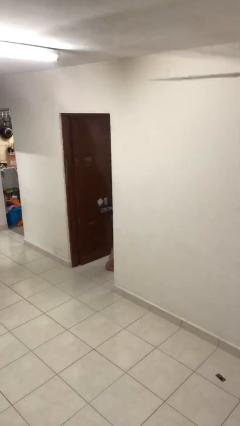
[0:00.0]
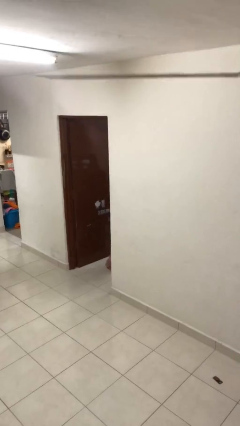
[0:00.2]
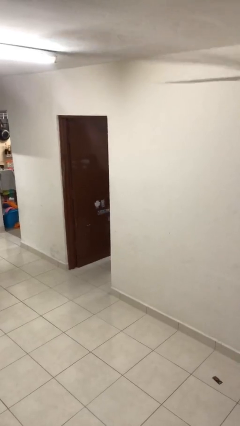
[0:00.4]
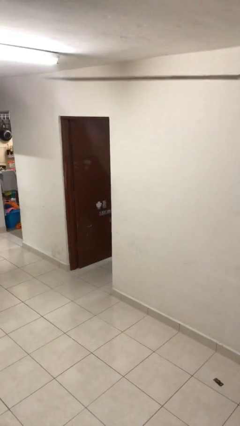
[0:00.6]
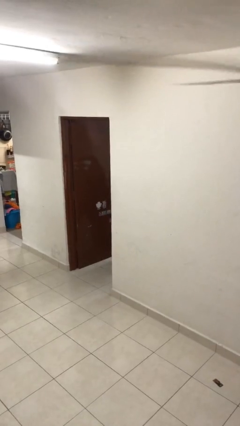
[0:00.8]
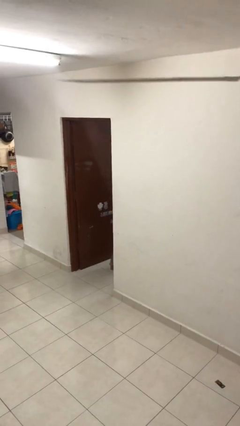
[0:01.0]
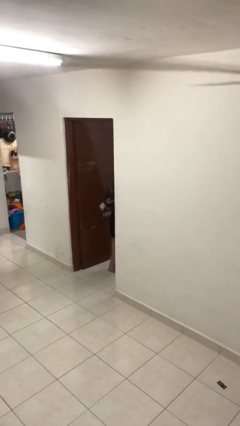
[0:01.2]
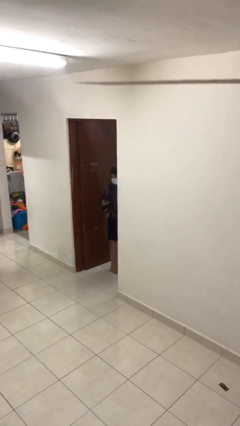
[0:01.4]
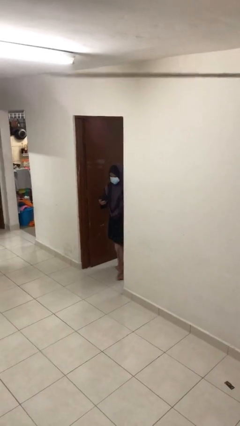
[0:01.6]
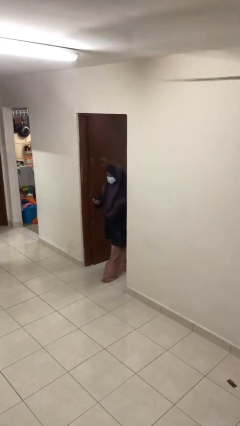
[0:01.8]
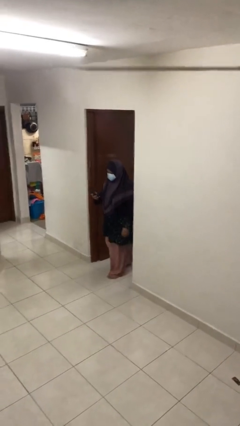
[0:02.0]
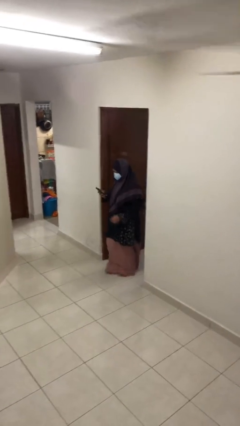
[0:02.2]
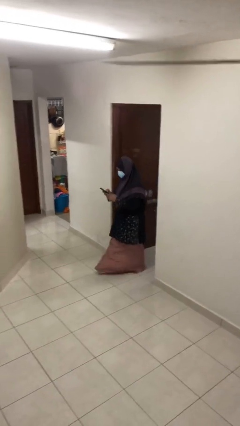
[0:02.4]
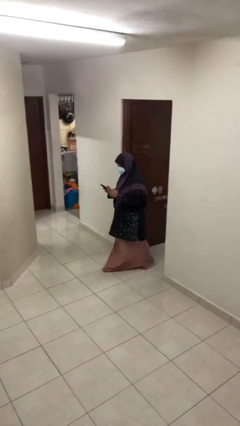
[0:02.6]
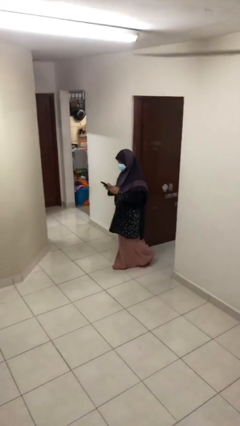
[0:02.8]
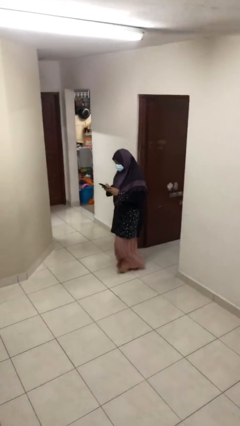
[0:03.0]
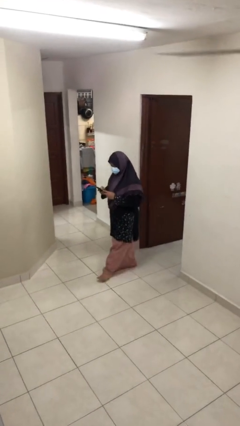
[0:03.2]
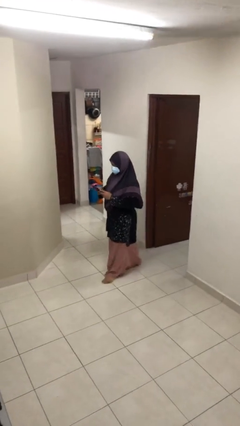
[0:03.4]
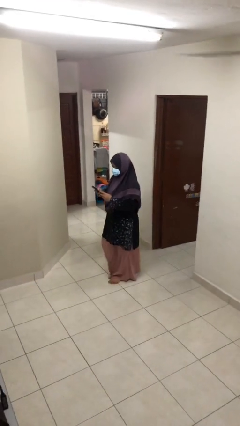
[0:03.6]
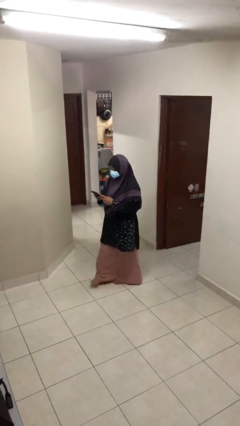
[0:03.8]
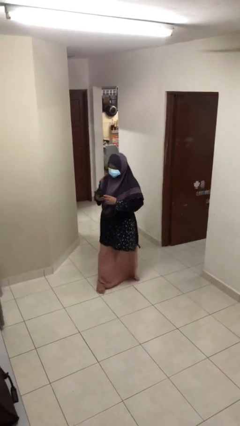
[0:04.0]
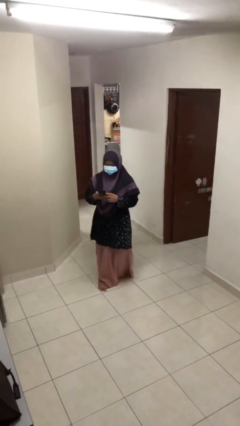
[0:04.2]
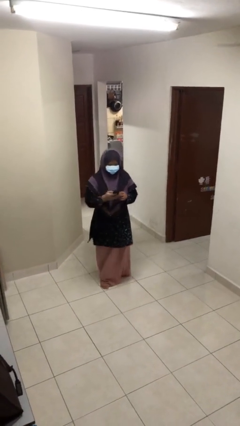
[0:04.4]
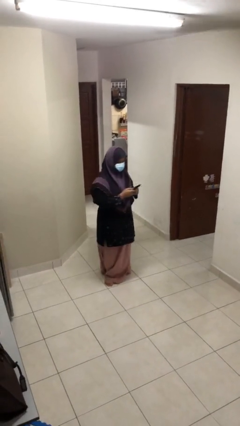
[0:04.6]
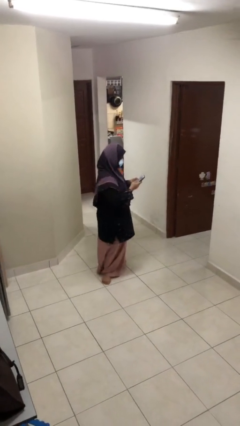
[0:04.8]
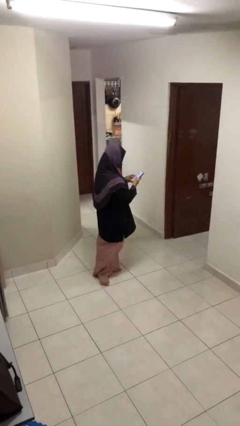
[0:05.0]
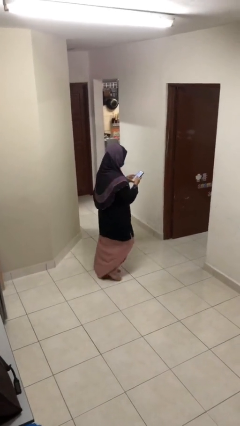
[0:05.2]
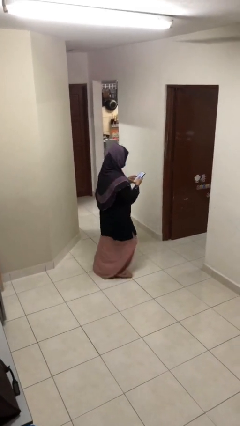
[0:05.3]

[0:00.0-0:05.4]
person exits scene through structure

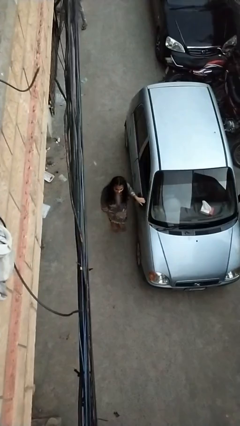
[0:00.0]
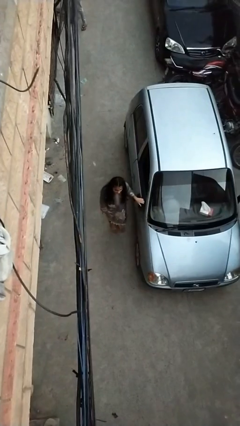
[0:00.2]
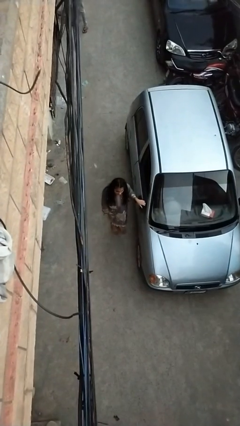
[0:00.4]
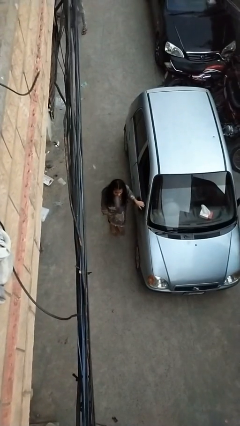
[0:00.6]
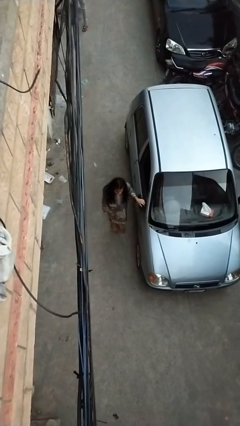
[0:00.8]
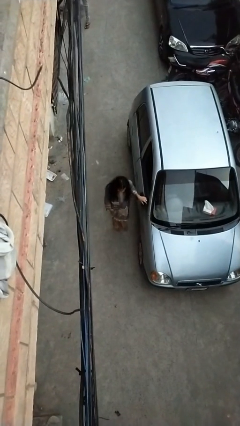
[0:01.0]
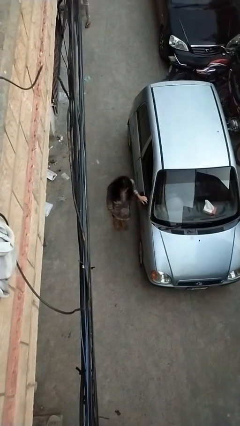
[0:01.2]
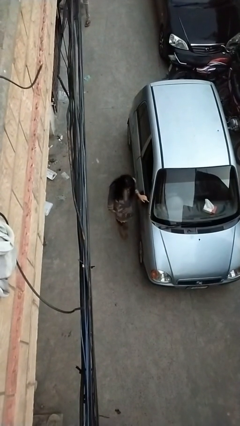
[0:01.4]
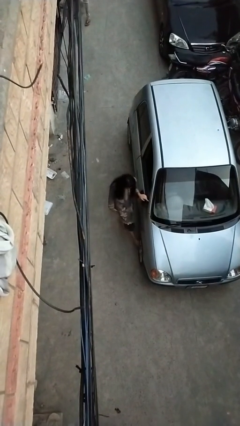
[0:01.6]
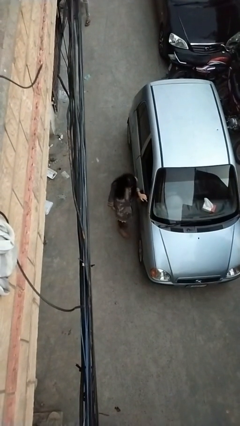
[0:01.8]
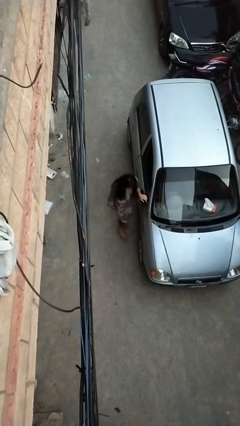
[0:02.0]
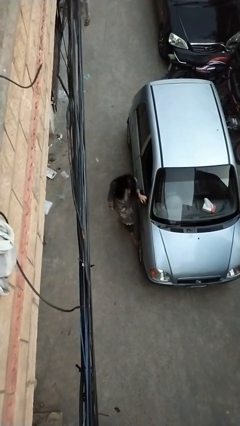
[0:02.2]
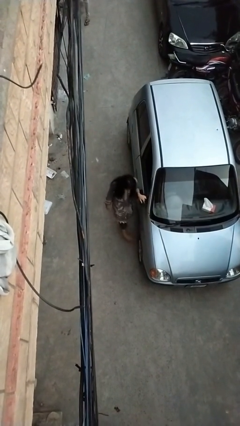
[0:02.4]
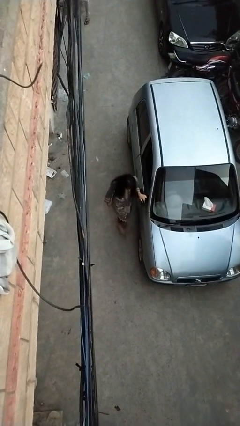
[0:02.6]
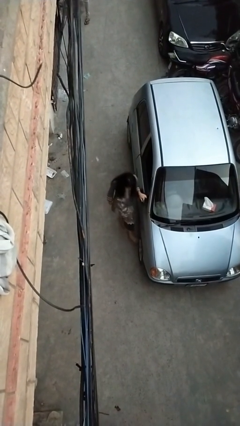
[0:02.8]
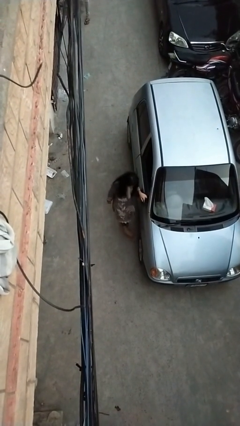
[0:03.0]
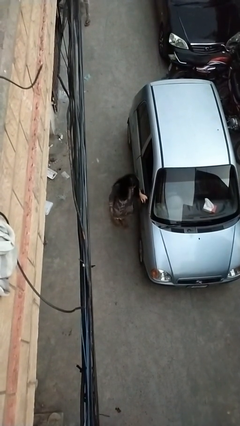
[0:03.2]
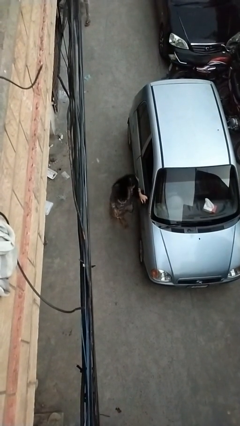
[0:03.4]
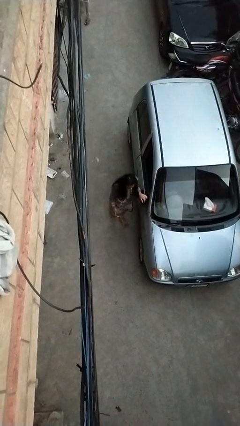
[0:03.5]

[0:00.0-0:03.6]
person kicks car tires

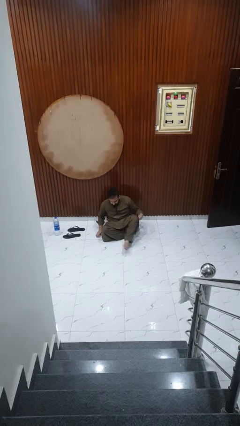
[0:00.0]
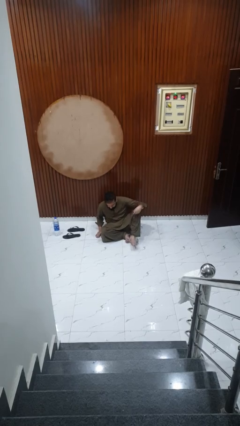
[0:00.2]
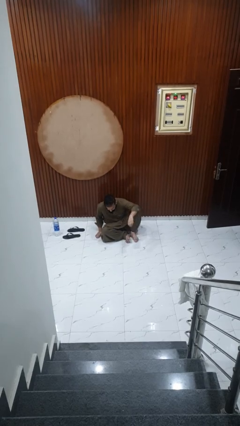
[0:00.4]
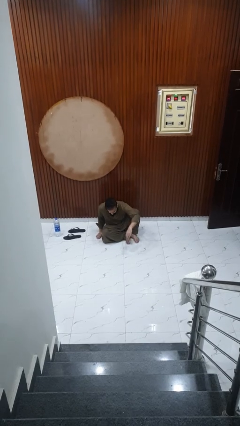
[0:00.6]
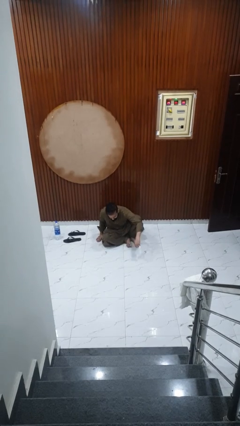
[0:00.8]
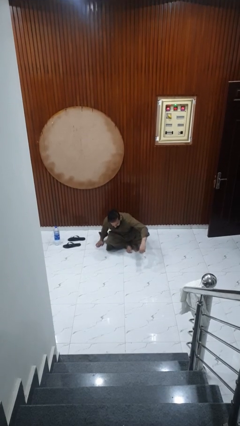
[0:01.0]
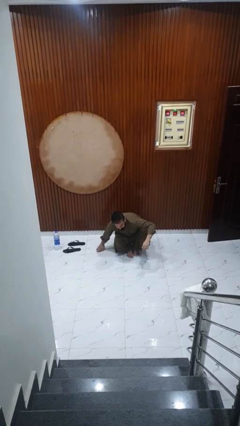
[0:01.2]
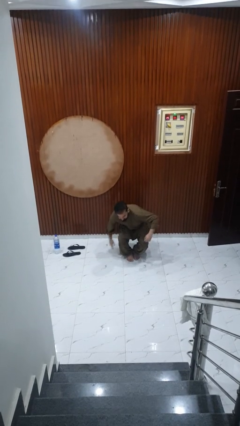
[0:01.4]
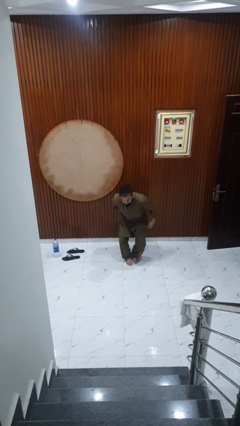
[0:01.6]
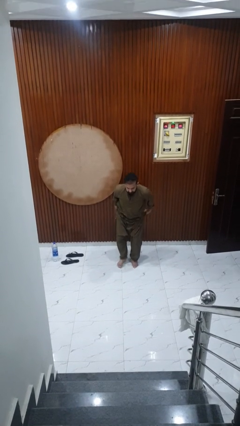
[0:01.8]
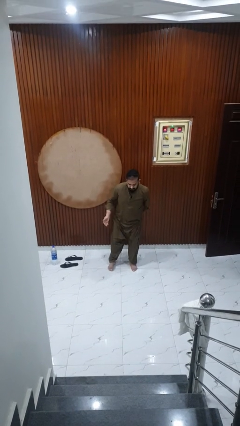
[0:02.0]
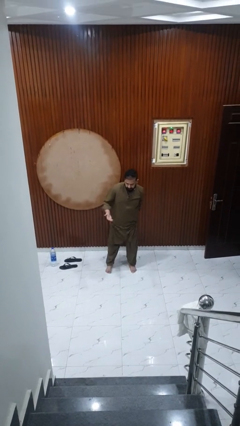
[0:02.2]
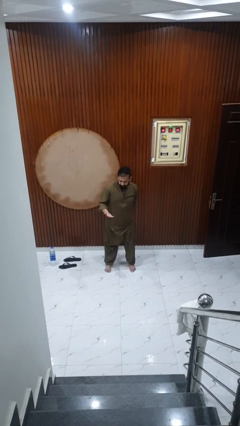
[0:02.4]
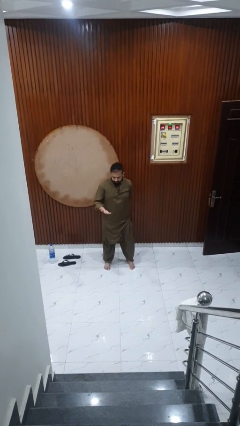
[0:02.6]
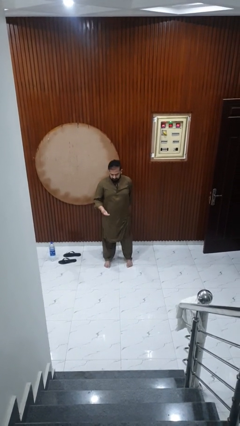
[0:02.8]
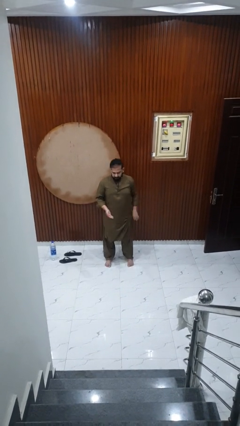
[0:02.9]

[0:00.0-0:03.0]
person stands up from floor

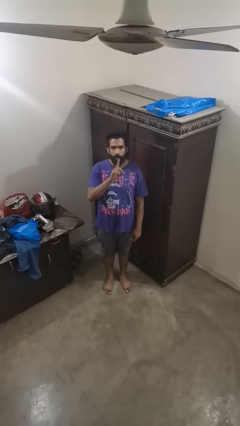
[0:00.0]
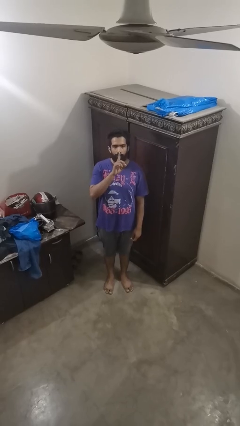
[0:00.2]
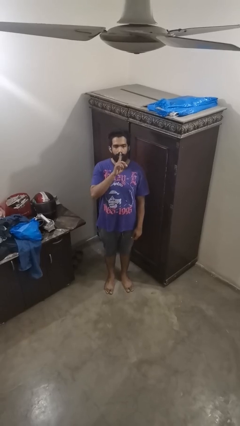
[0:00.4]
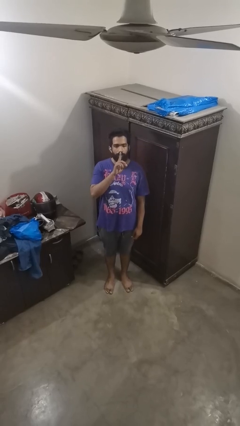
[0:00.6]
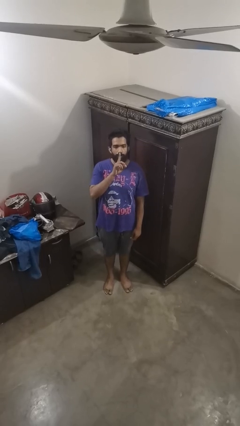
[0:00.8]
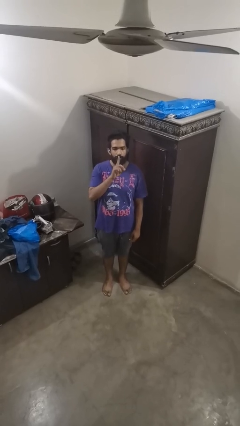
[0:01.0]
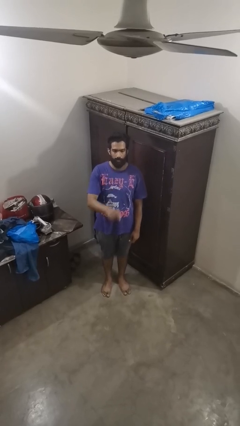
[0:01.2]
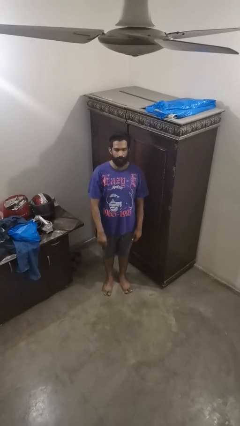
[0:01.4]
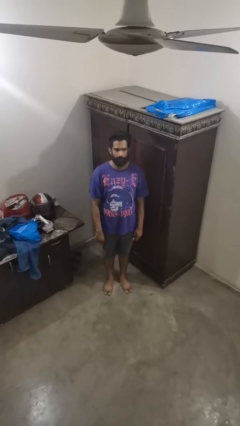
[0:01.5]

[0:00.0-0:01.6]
person gestures be quiet

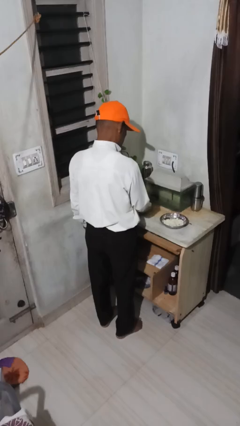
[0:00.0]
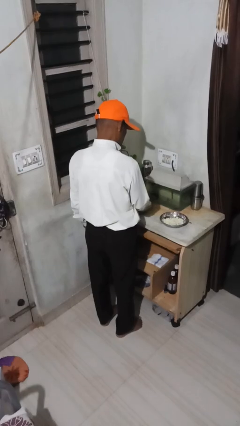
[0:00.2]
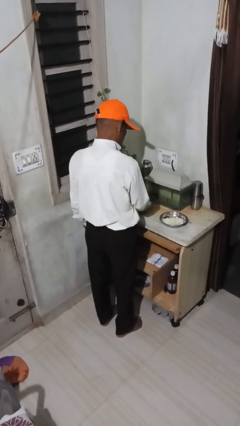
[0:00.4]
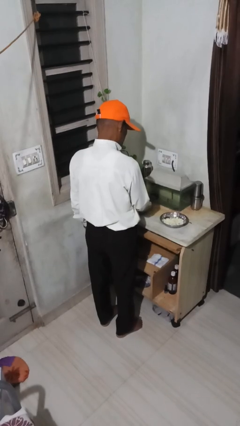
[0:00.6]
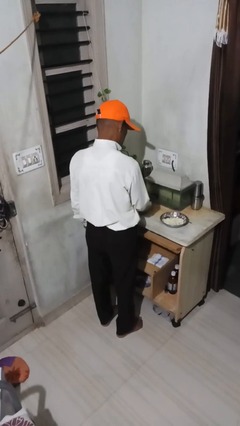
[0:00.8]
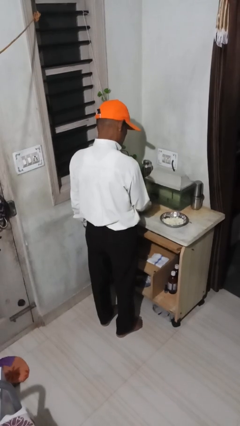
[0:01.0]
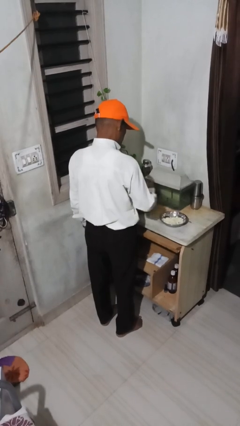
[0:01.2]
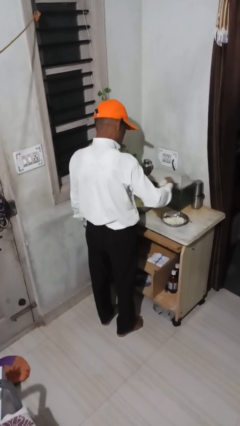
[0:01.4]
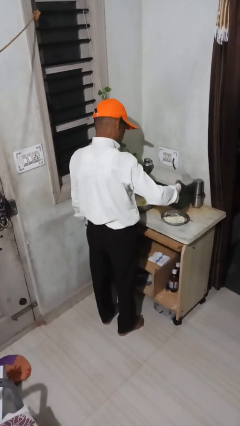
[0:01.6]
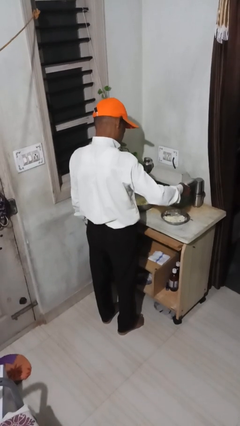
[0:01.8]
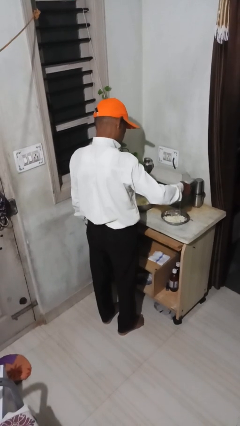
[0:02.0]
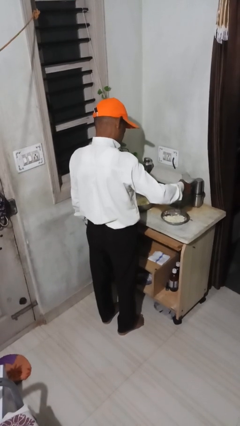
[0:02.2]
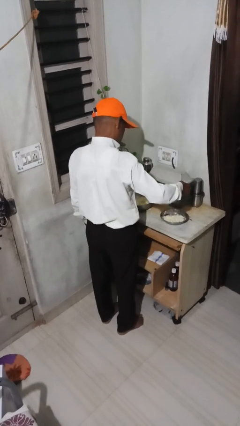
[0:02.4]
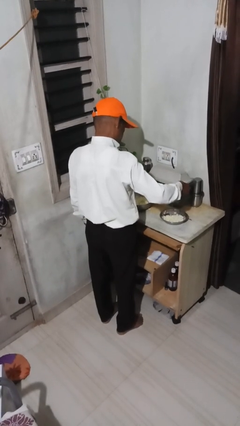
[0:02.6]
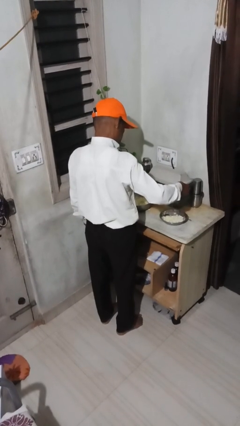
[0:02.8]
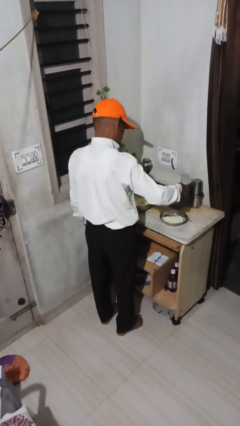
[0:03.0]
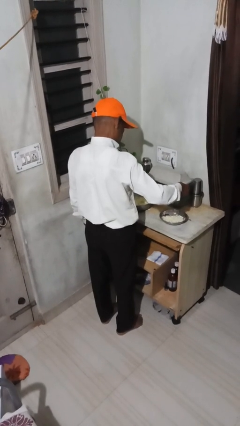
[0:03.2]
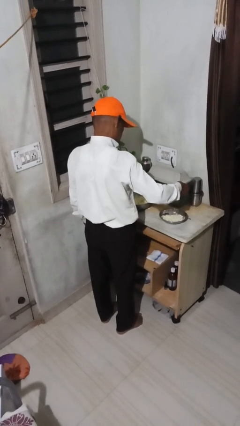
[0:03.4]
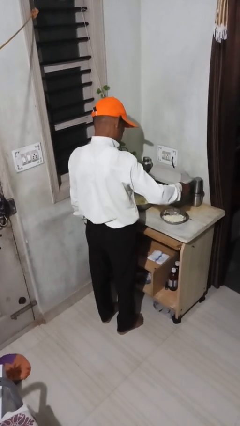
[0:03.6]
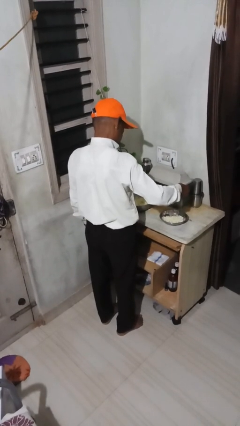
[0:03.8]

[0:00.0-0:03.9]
person pours into bowl

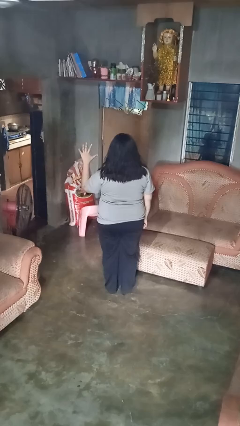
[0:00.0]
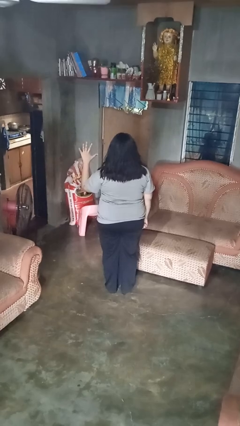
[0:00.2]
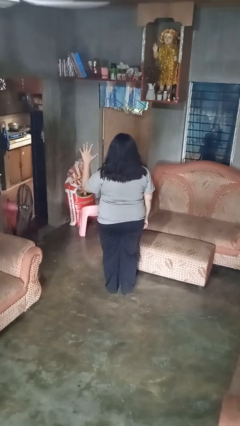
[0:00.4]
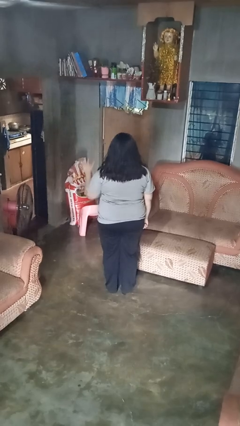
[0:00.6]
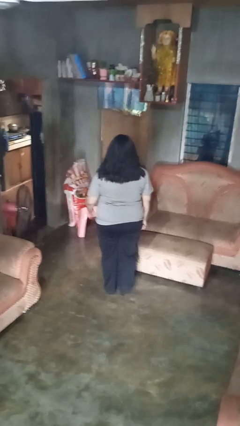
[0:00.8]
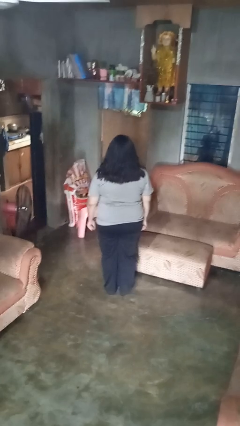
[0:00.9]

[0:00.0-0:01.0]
person gestures number five
